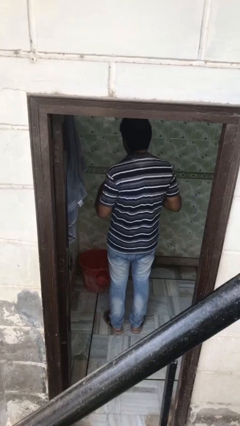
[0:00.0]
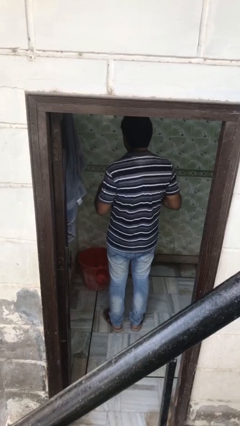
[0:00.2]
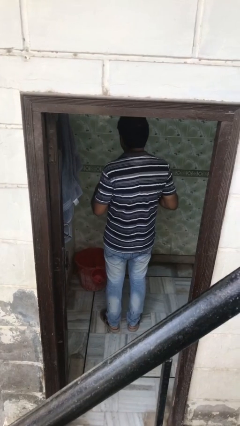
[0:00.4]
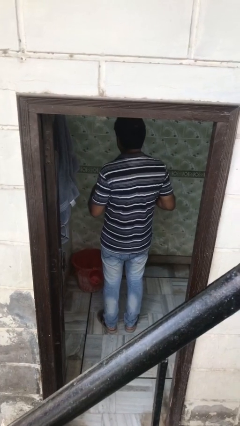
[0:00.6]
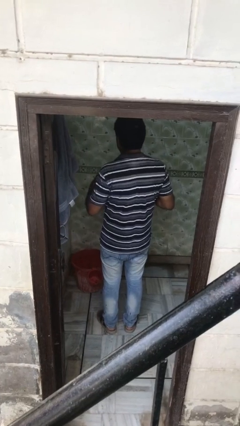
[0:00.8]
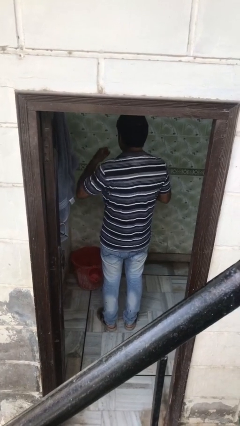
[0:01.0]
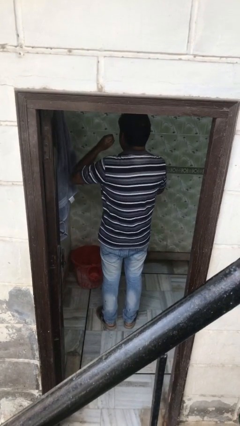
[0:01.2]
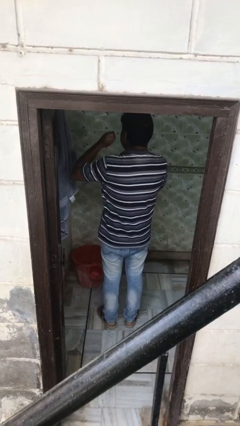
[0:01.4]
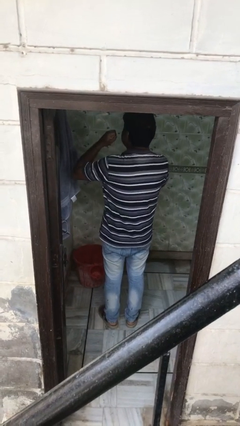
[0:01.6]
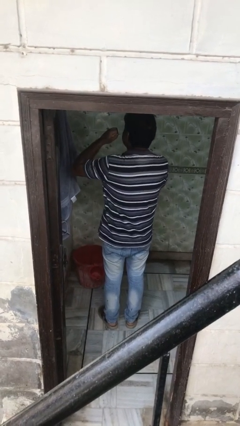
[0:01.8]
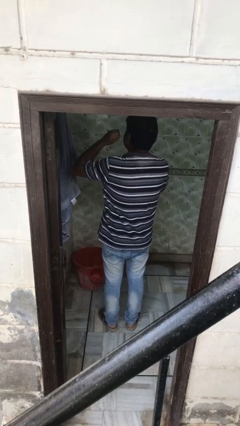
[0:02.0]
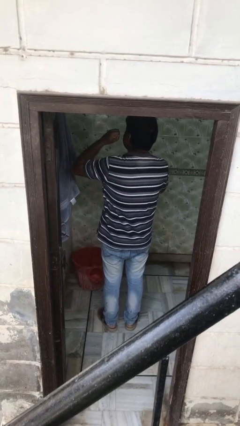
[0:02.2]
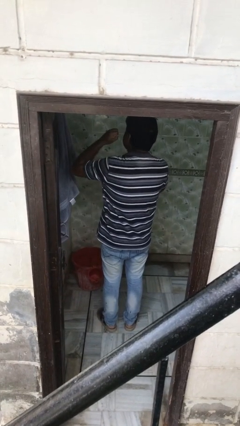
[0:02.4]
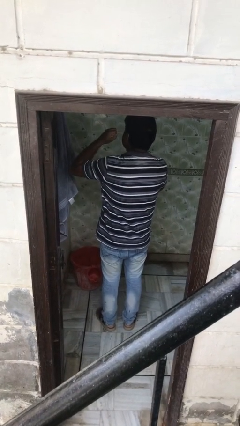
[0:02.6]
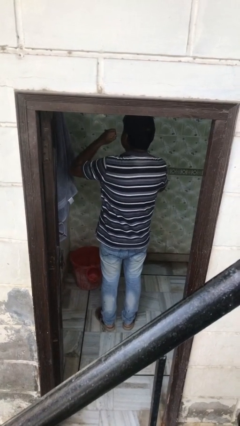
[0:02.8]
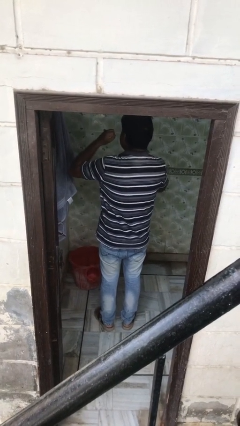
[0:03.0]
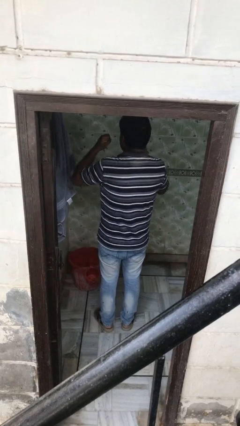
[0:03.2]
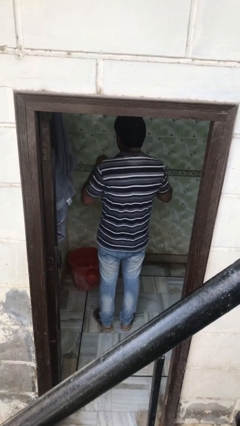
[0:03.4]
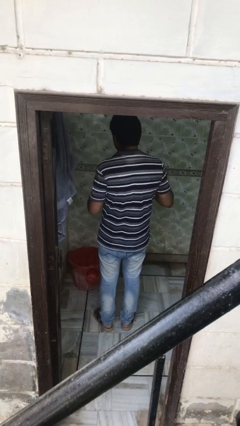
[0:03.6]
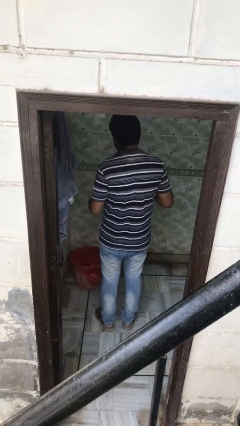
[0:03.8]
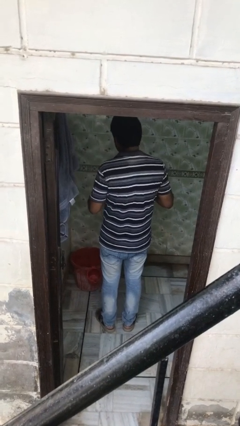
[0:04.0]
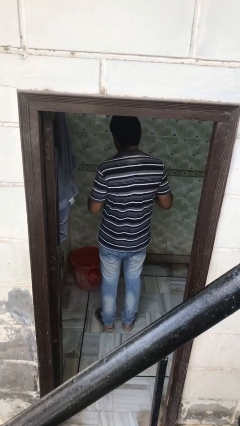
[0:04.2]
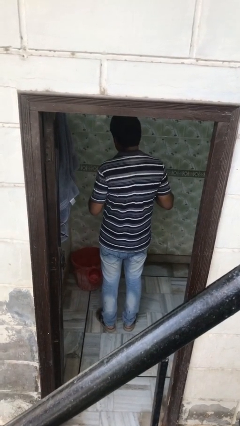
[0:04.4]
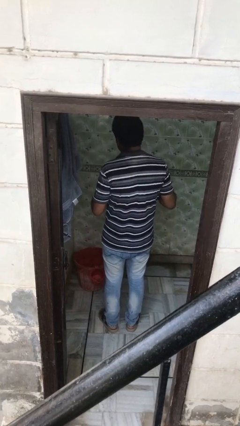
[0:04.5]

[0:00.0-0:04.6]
person flosses

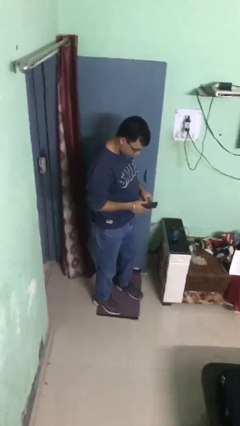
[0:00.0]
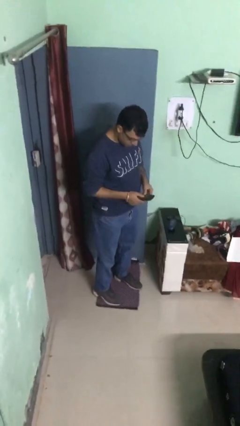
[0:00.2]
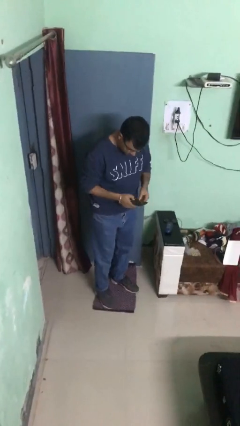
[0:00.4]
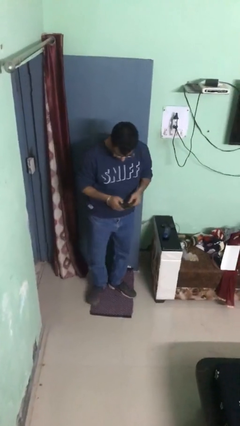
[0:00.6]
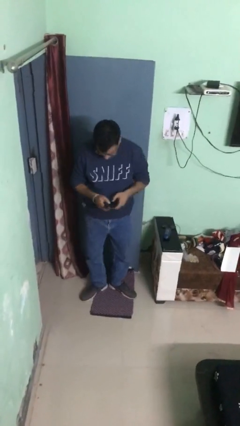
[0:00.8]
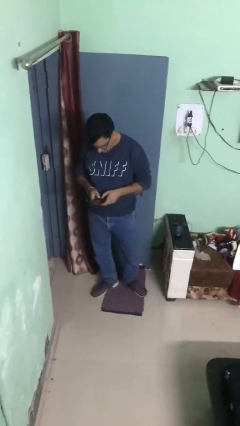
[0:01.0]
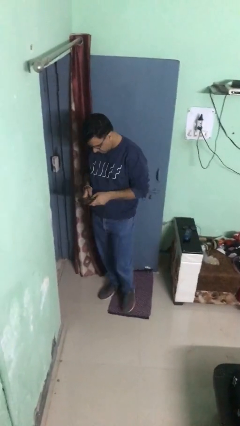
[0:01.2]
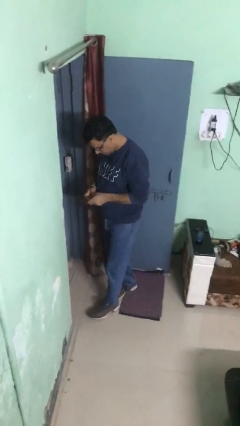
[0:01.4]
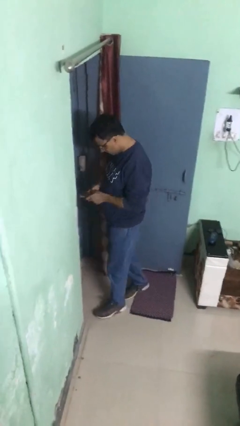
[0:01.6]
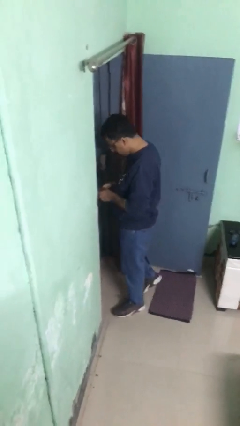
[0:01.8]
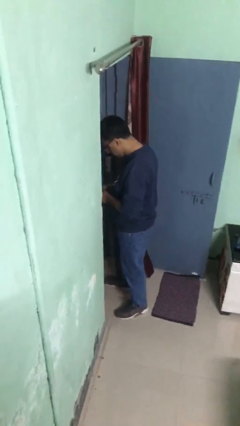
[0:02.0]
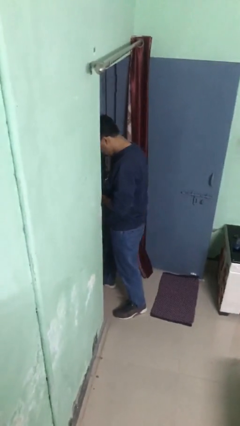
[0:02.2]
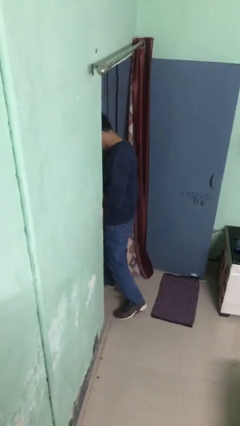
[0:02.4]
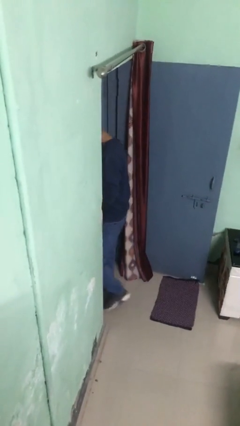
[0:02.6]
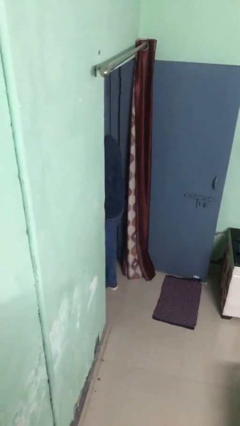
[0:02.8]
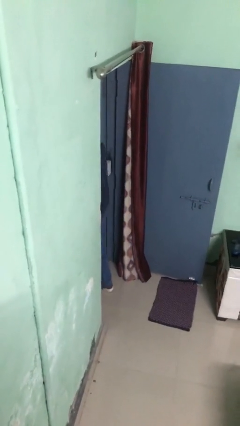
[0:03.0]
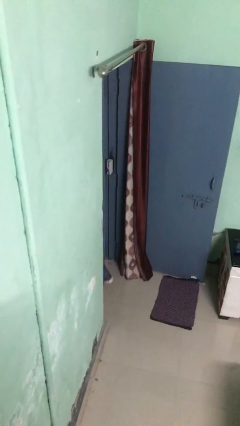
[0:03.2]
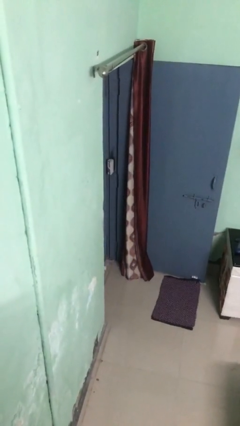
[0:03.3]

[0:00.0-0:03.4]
person exits scene through structure

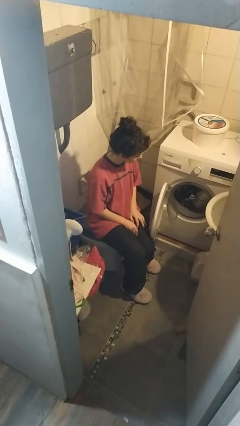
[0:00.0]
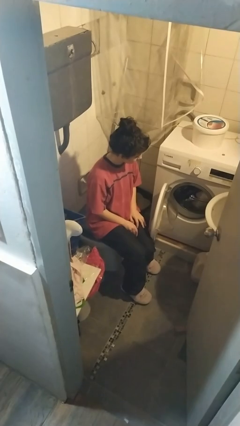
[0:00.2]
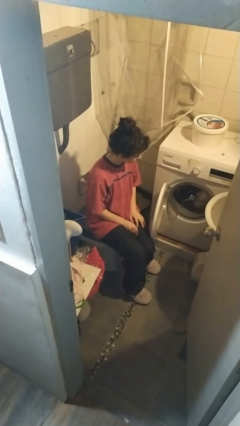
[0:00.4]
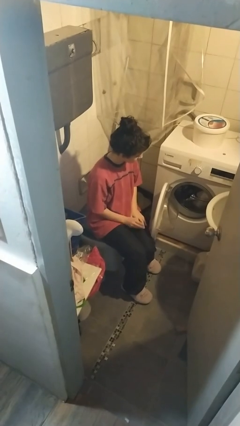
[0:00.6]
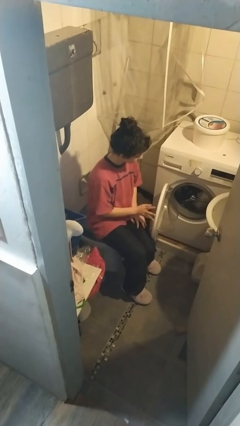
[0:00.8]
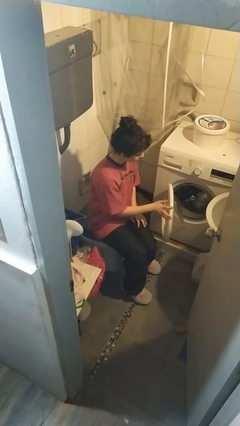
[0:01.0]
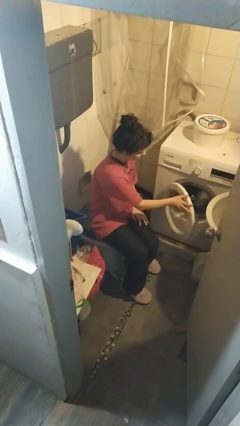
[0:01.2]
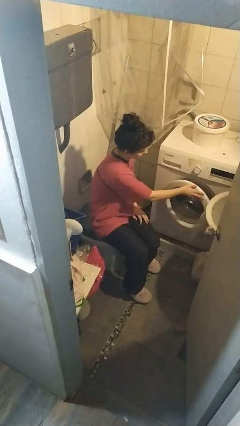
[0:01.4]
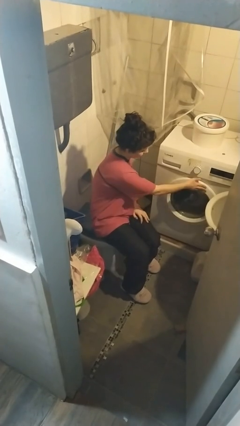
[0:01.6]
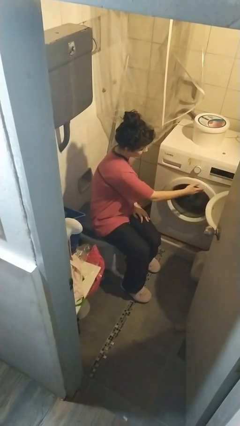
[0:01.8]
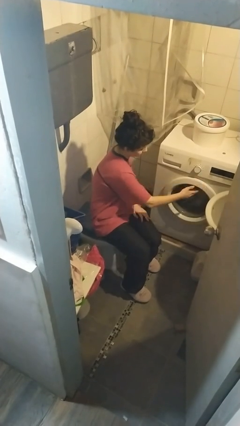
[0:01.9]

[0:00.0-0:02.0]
person closes clothes washer

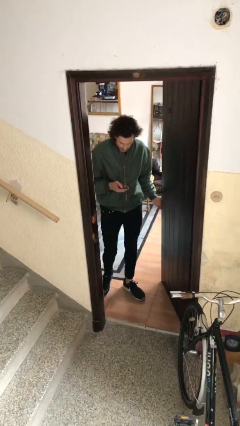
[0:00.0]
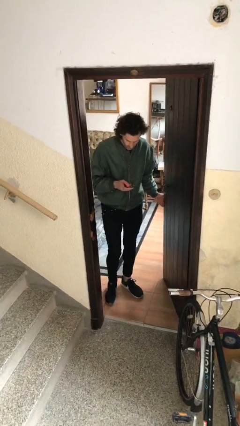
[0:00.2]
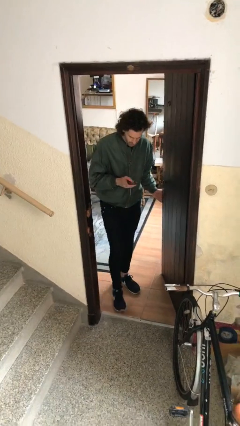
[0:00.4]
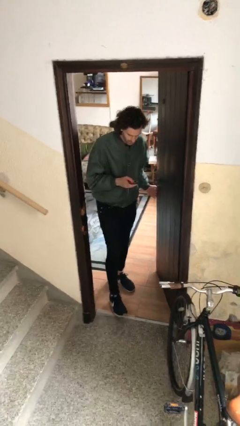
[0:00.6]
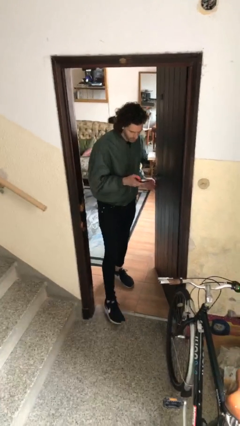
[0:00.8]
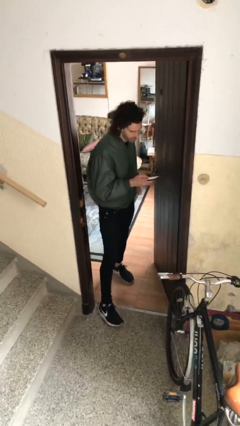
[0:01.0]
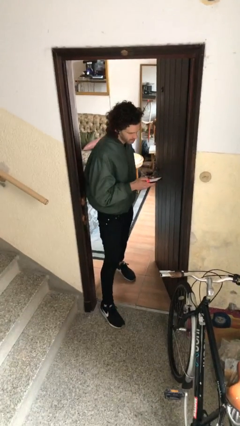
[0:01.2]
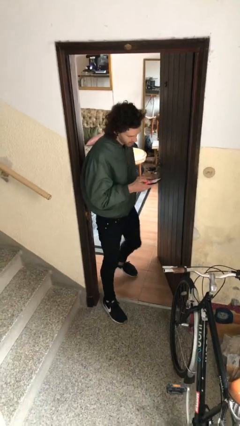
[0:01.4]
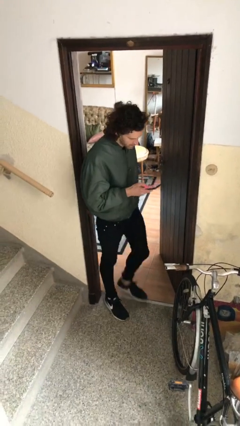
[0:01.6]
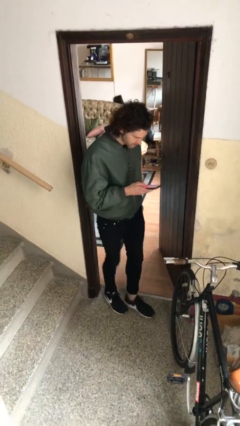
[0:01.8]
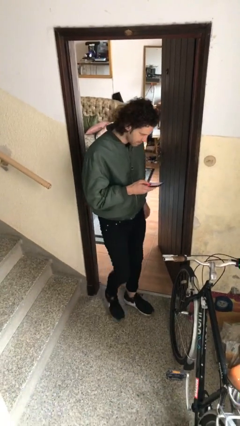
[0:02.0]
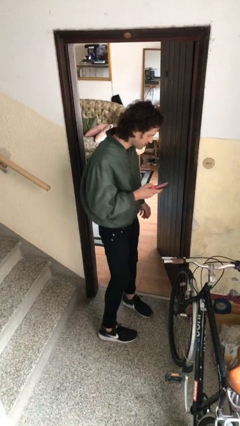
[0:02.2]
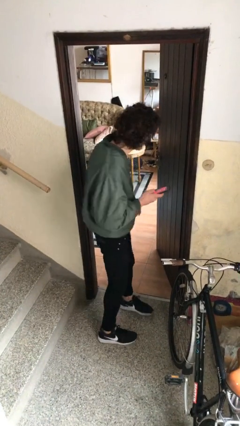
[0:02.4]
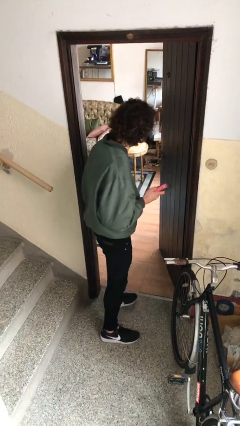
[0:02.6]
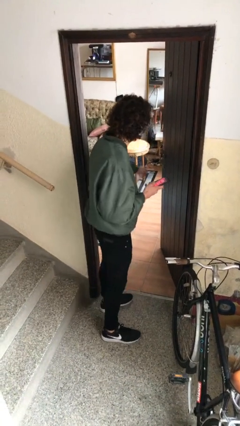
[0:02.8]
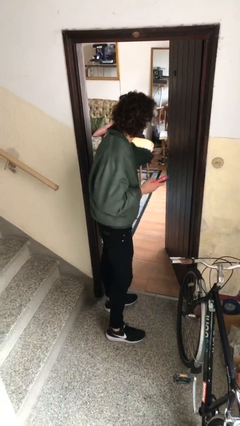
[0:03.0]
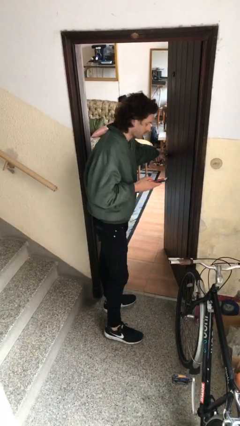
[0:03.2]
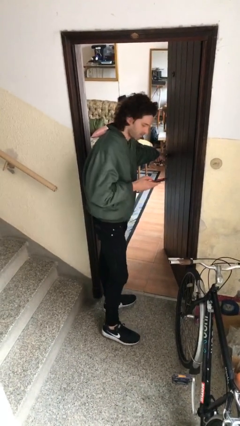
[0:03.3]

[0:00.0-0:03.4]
person enters scene through structure

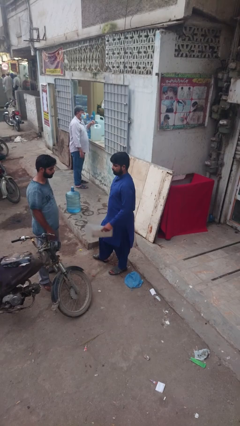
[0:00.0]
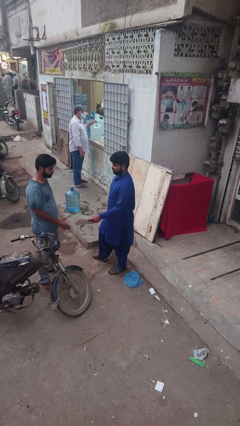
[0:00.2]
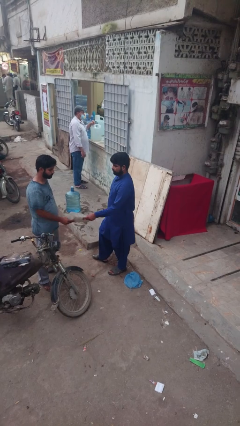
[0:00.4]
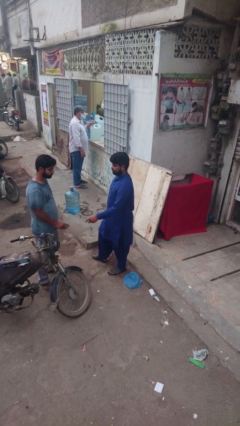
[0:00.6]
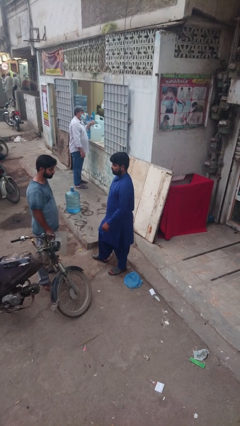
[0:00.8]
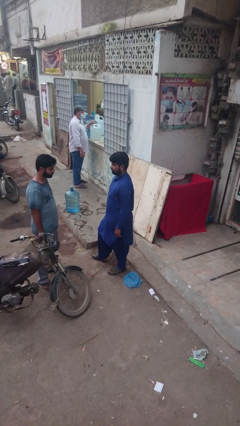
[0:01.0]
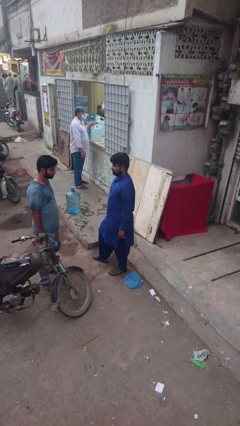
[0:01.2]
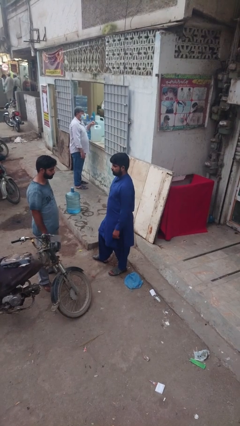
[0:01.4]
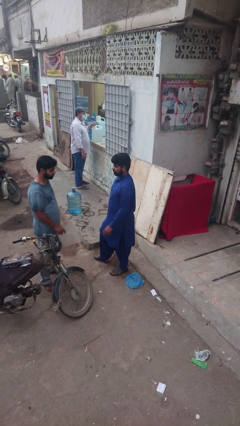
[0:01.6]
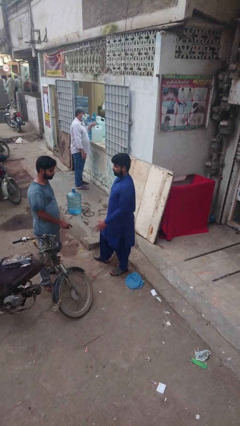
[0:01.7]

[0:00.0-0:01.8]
person transfers object to person

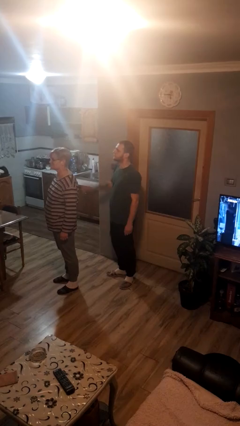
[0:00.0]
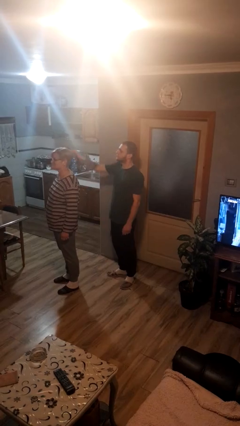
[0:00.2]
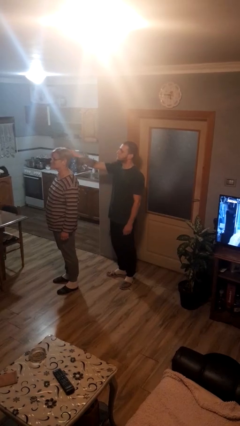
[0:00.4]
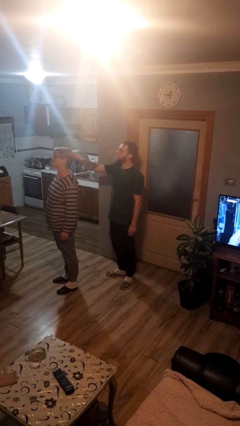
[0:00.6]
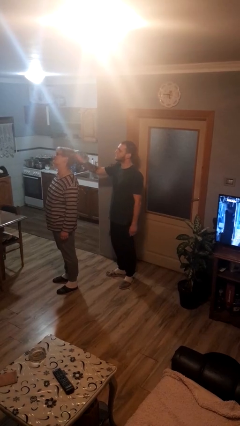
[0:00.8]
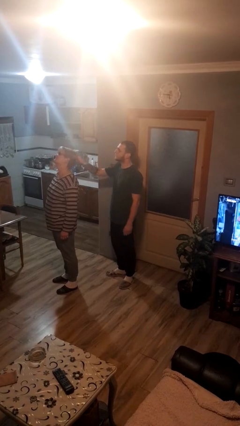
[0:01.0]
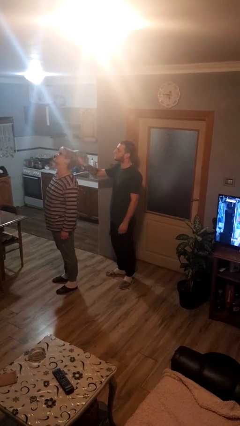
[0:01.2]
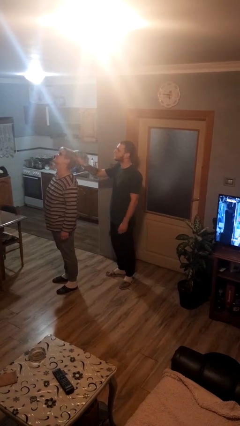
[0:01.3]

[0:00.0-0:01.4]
person grabs person by hair

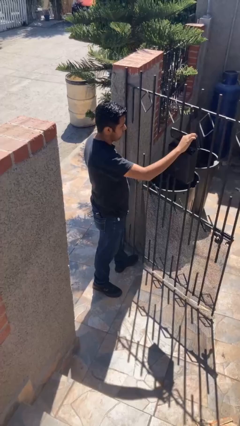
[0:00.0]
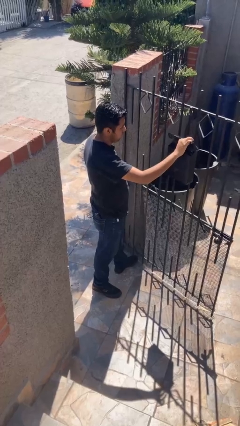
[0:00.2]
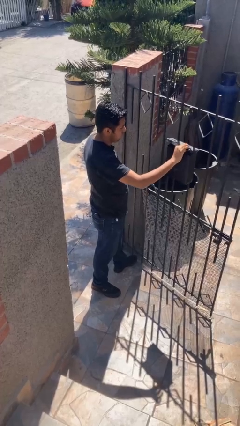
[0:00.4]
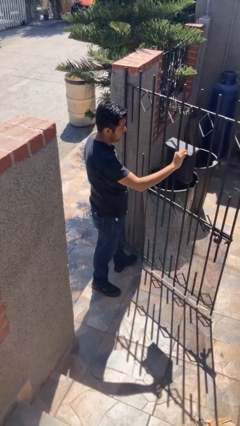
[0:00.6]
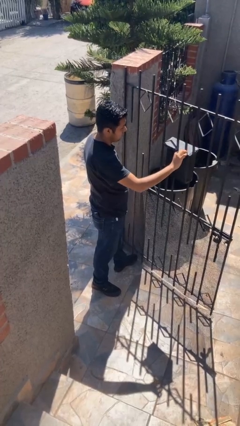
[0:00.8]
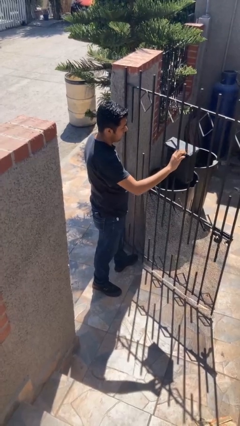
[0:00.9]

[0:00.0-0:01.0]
person closes mailbox
